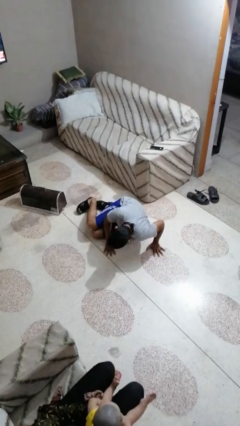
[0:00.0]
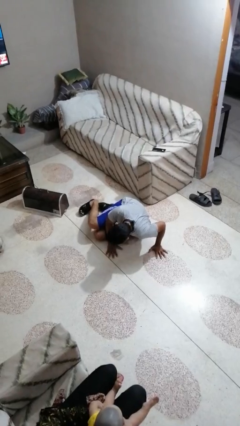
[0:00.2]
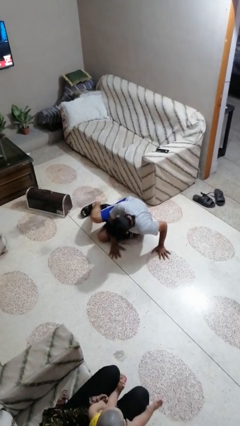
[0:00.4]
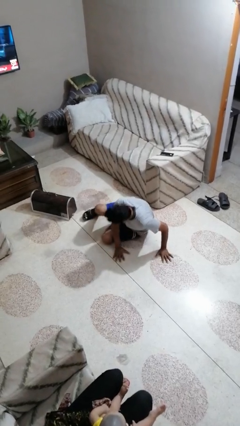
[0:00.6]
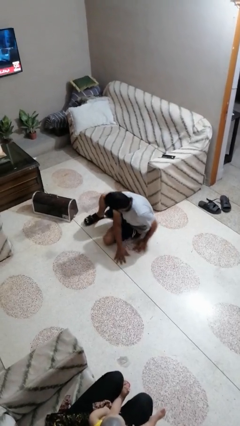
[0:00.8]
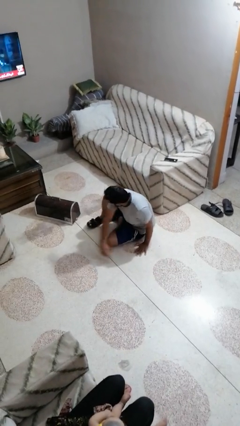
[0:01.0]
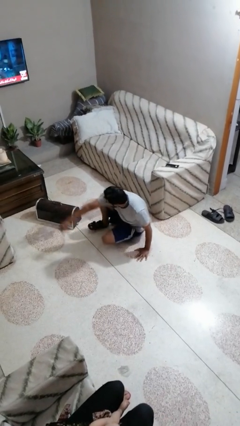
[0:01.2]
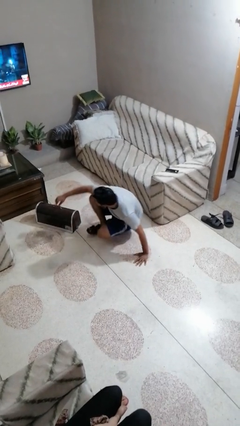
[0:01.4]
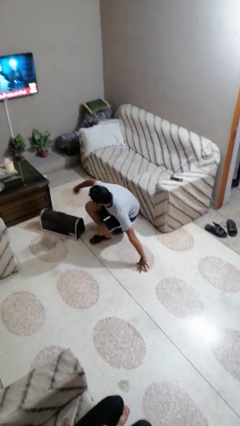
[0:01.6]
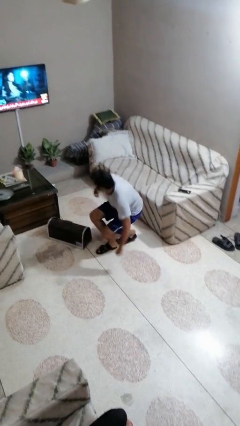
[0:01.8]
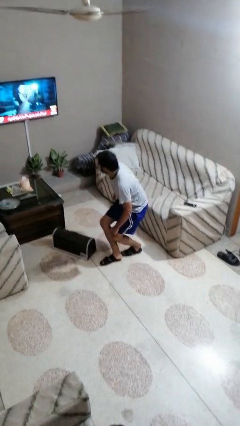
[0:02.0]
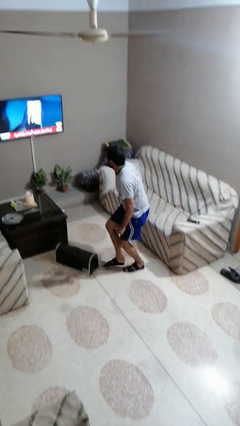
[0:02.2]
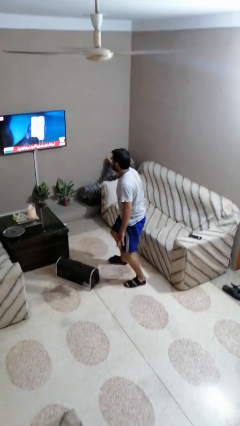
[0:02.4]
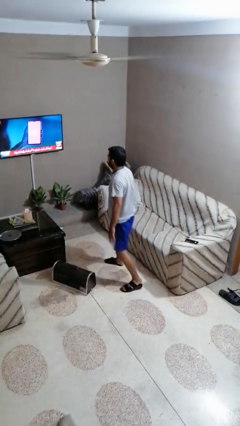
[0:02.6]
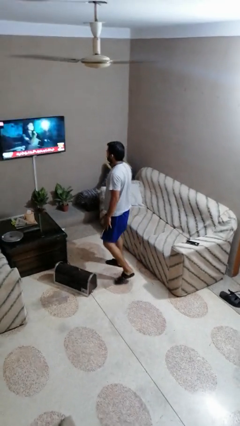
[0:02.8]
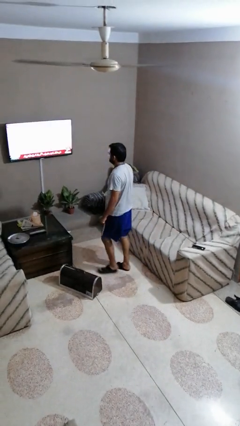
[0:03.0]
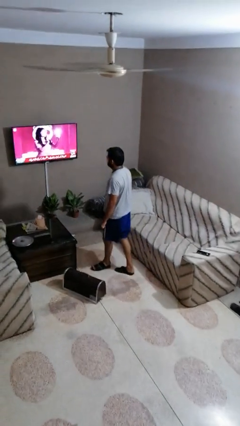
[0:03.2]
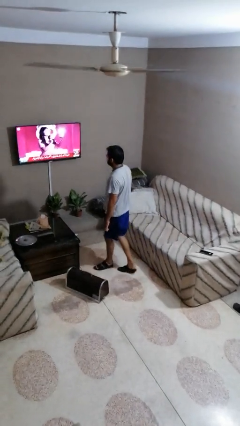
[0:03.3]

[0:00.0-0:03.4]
person stands up from floor

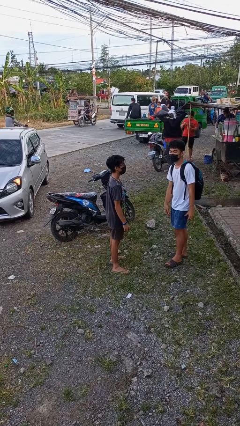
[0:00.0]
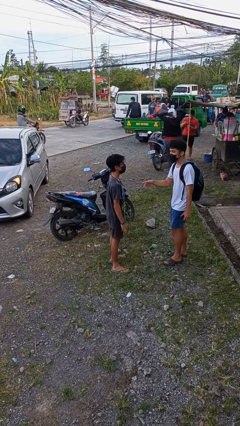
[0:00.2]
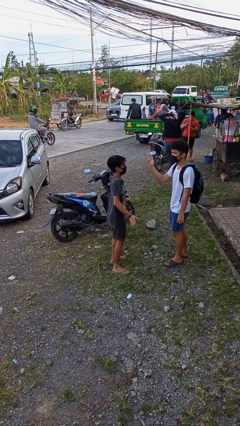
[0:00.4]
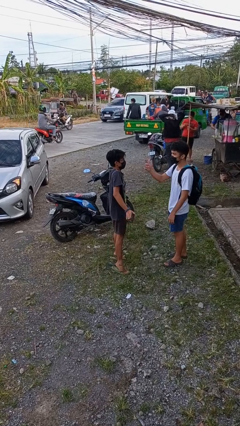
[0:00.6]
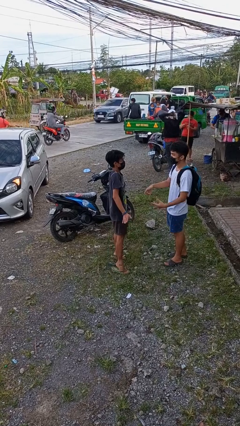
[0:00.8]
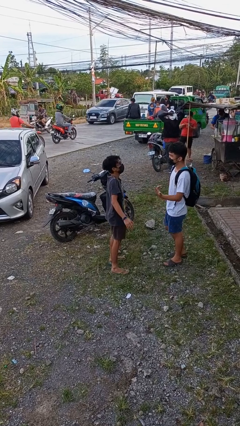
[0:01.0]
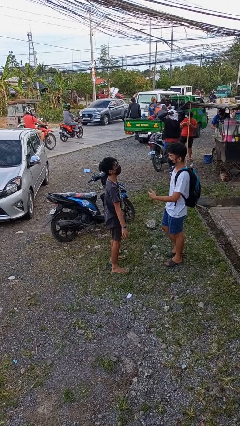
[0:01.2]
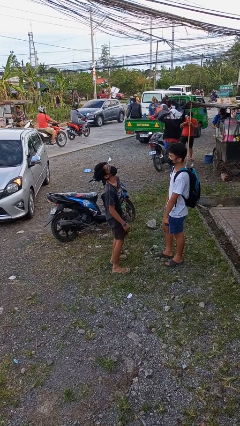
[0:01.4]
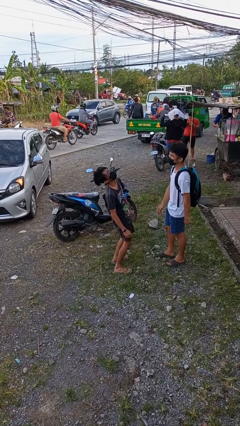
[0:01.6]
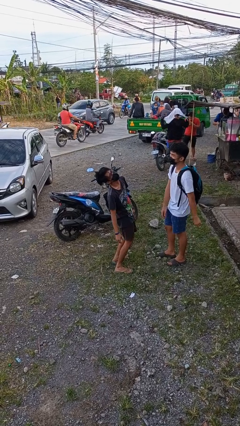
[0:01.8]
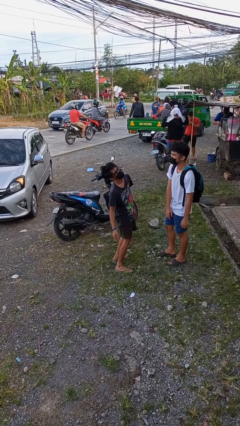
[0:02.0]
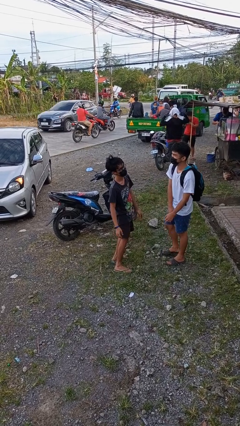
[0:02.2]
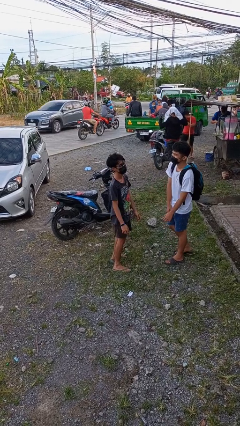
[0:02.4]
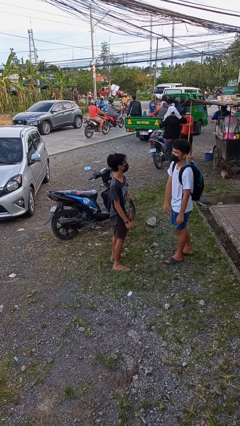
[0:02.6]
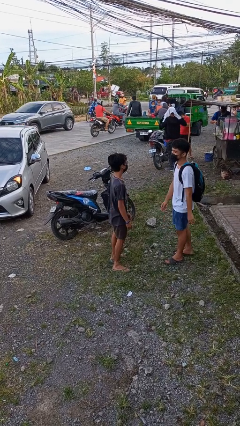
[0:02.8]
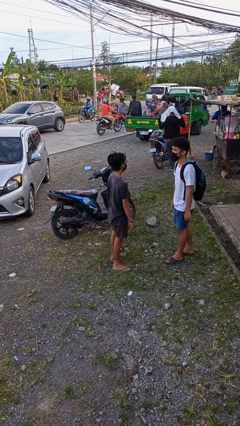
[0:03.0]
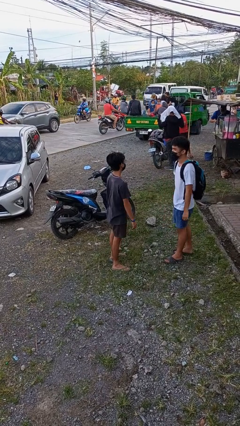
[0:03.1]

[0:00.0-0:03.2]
person talks to person

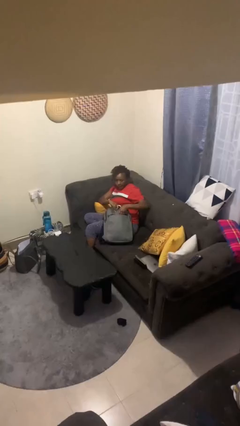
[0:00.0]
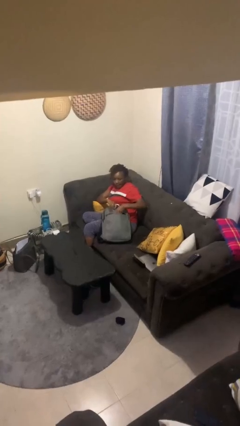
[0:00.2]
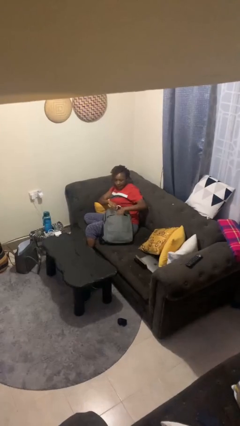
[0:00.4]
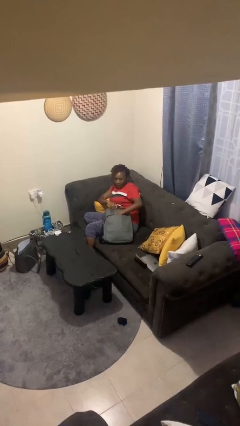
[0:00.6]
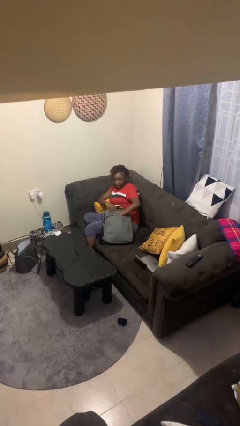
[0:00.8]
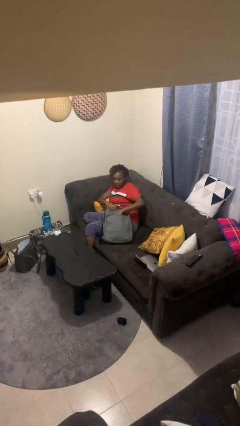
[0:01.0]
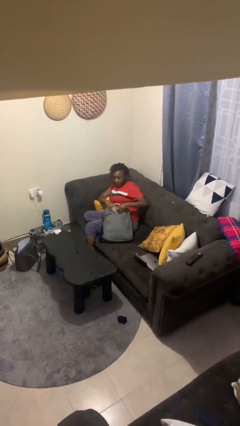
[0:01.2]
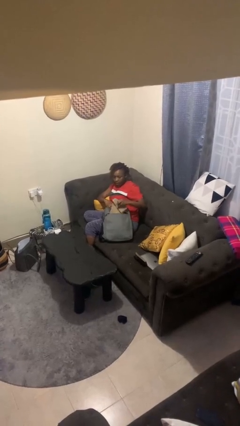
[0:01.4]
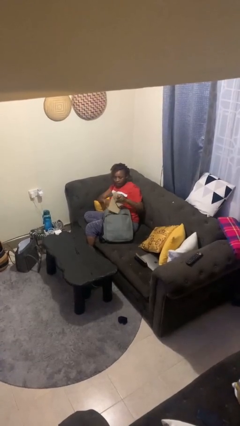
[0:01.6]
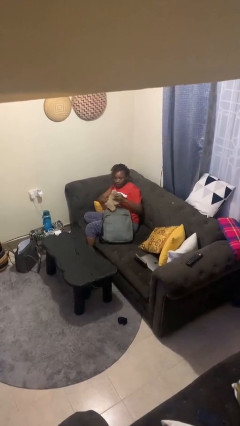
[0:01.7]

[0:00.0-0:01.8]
person takes object from backpack

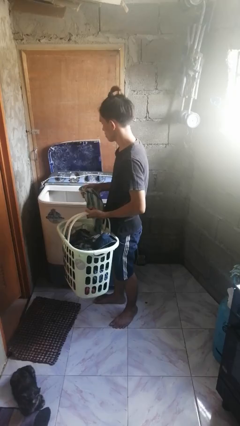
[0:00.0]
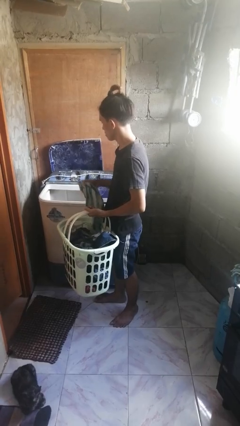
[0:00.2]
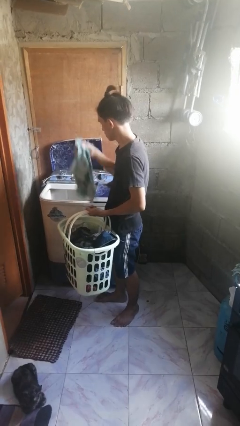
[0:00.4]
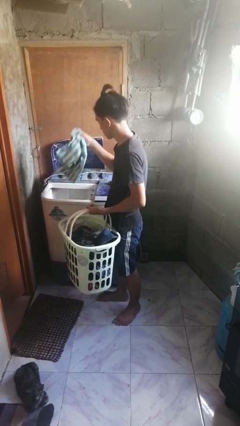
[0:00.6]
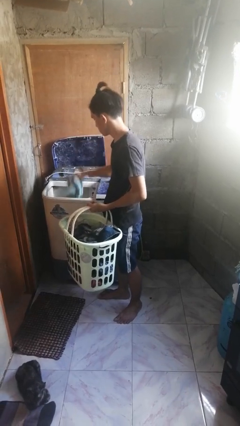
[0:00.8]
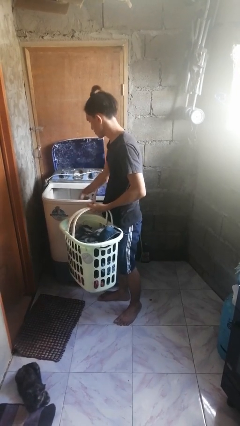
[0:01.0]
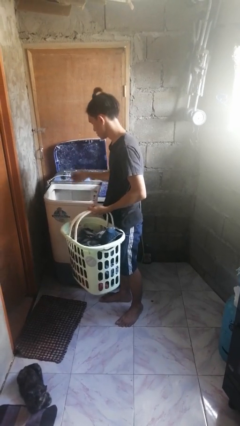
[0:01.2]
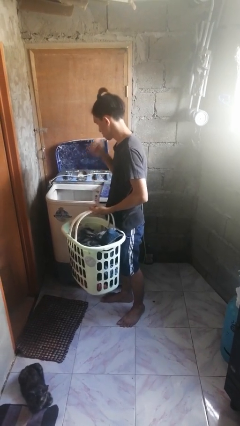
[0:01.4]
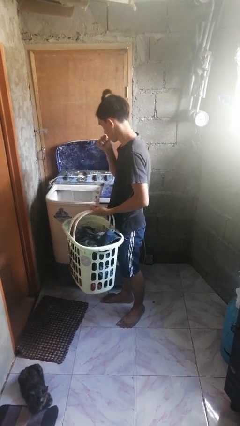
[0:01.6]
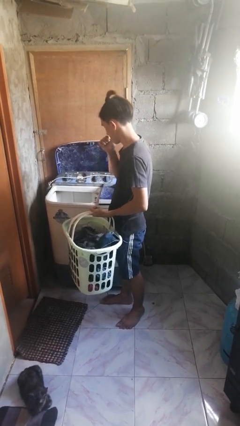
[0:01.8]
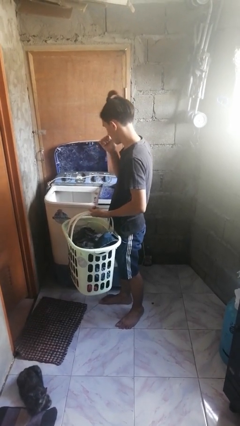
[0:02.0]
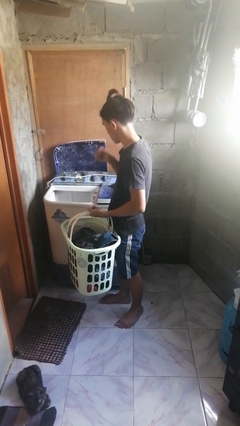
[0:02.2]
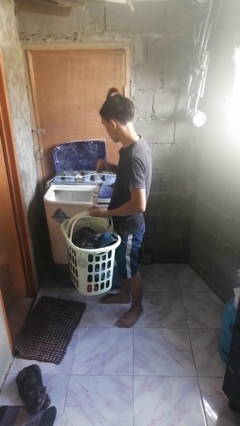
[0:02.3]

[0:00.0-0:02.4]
person loads clotheswasher

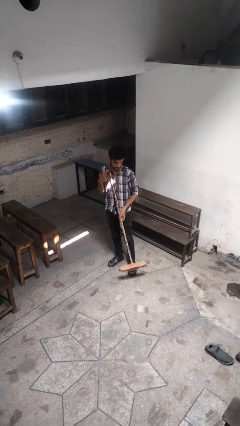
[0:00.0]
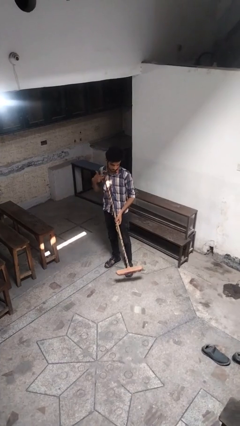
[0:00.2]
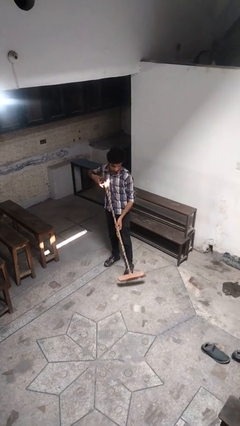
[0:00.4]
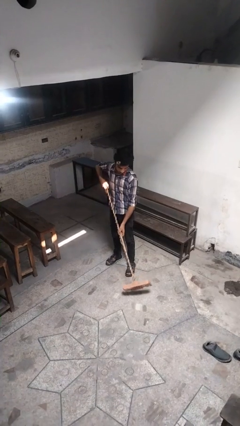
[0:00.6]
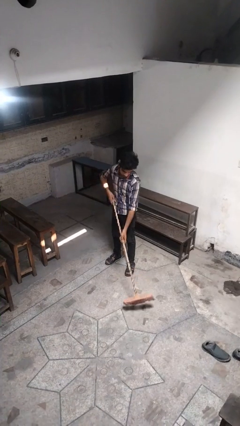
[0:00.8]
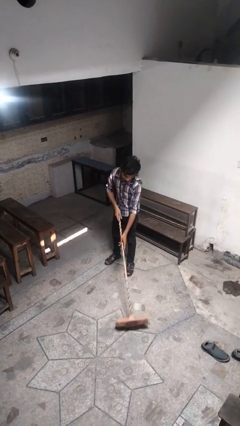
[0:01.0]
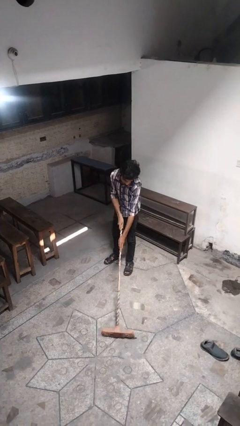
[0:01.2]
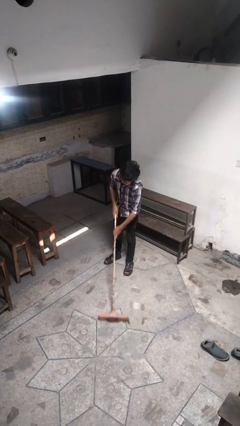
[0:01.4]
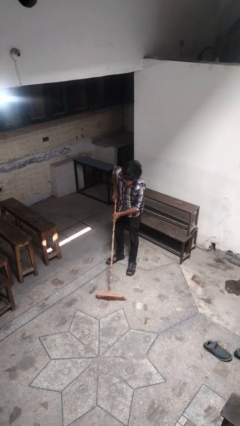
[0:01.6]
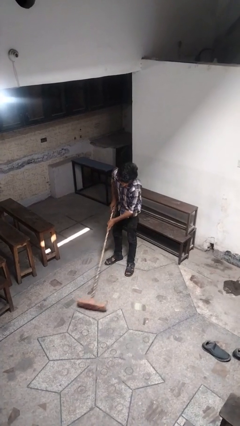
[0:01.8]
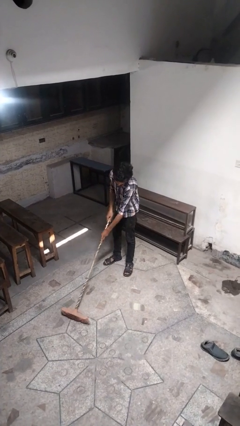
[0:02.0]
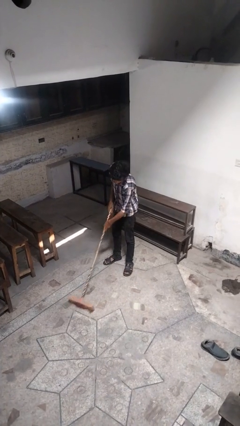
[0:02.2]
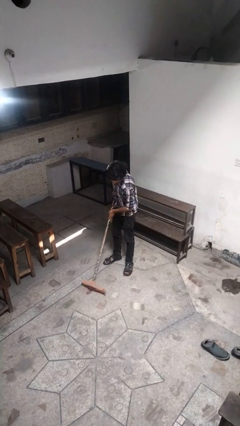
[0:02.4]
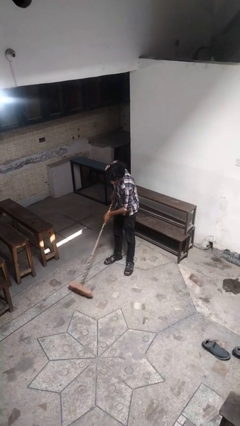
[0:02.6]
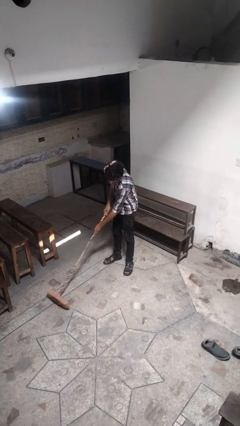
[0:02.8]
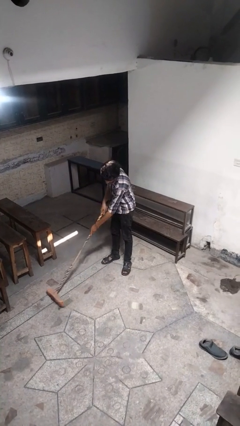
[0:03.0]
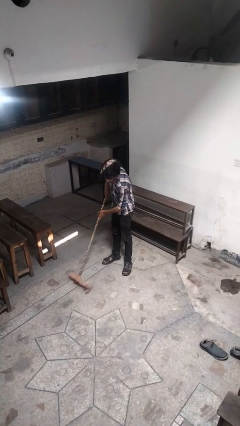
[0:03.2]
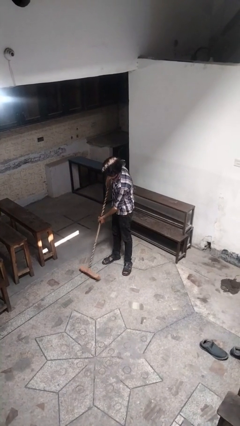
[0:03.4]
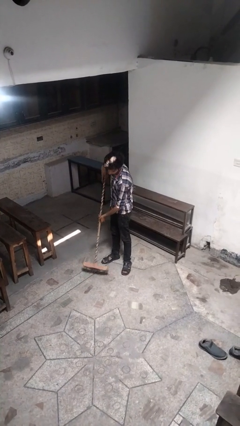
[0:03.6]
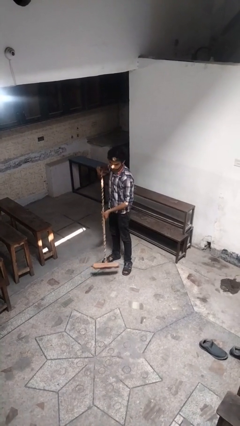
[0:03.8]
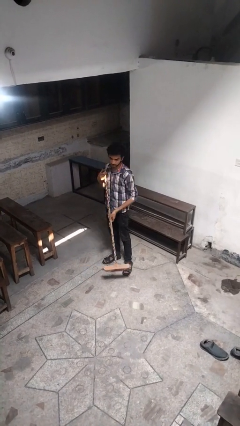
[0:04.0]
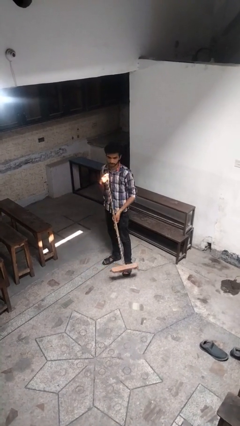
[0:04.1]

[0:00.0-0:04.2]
person sweeps floor

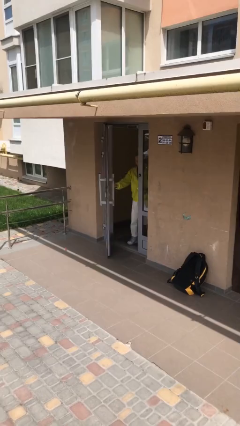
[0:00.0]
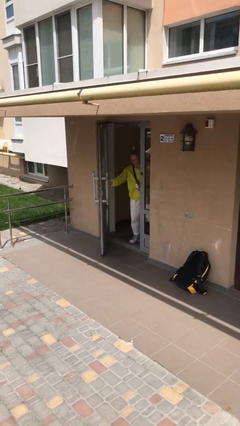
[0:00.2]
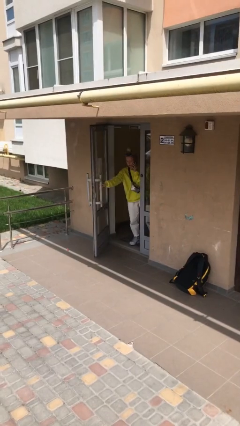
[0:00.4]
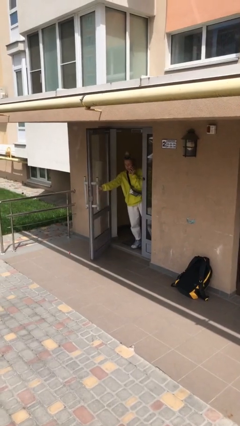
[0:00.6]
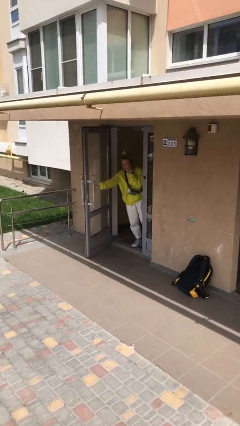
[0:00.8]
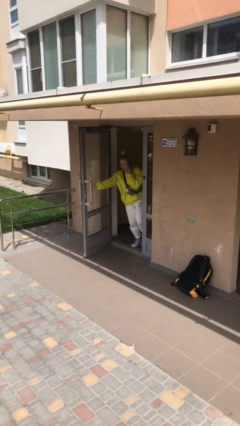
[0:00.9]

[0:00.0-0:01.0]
person opens facility door

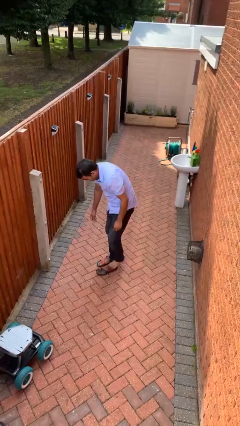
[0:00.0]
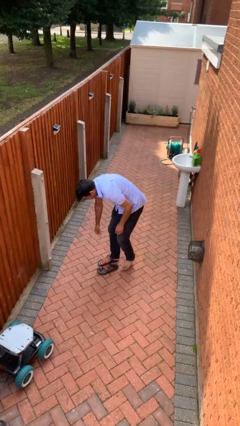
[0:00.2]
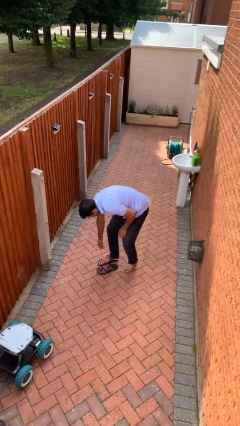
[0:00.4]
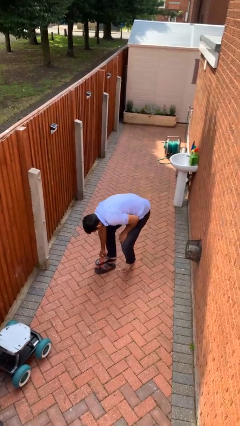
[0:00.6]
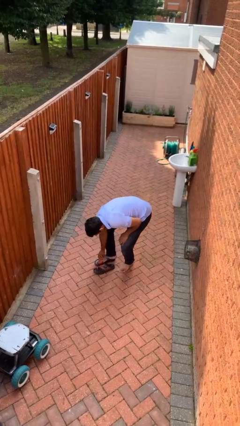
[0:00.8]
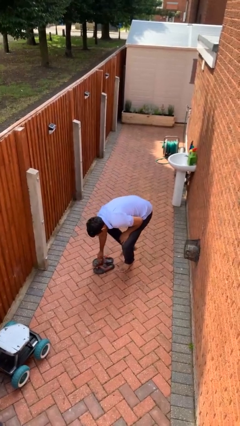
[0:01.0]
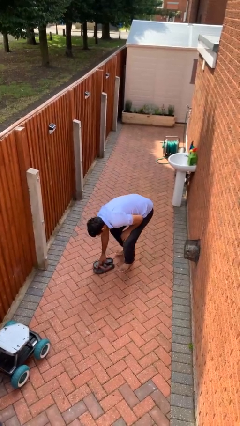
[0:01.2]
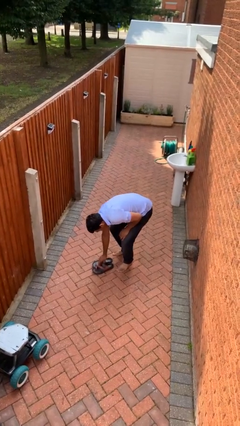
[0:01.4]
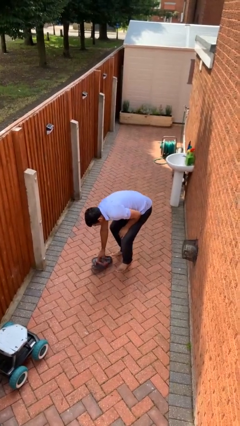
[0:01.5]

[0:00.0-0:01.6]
person takes off shoes
